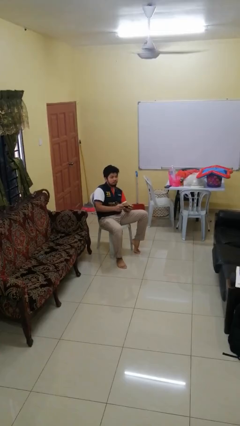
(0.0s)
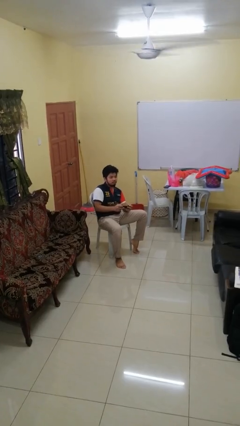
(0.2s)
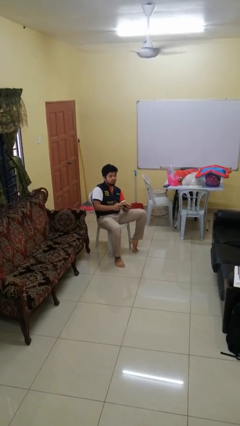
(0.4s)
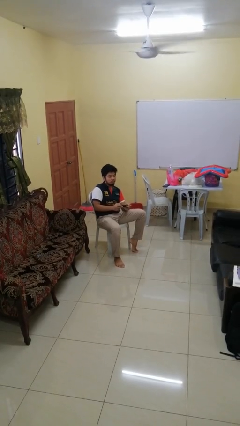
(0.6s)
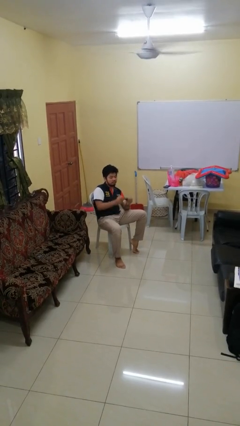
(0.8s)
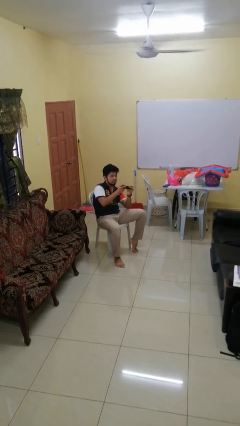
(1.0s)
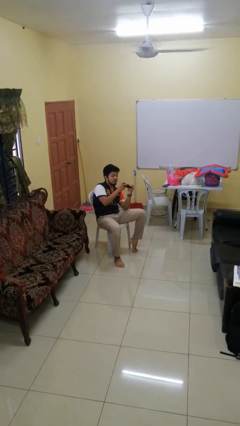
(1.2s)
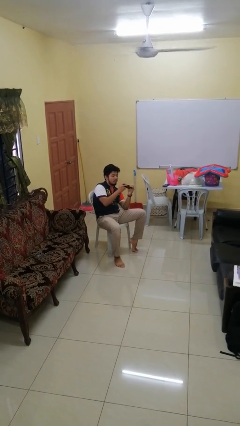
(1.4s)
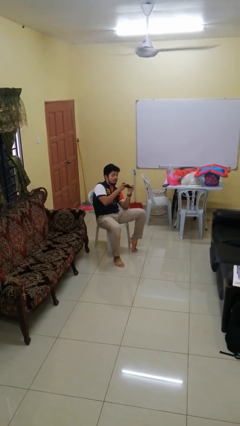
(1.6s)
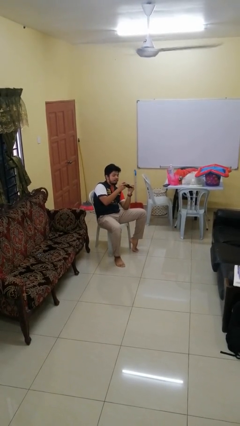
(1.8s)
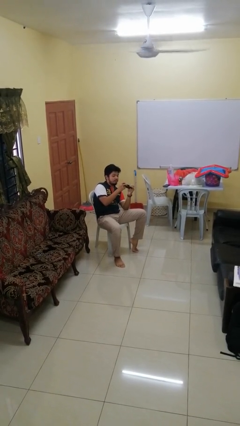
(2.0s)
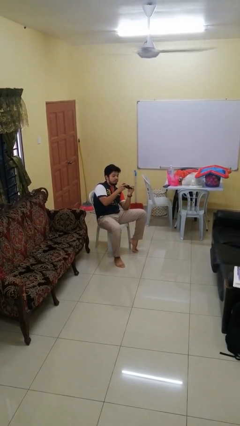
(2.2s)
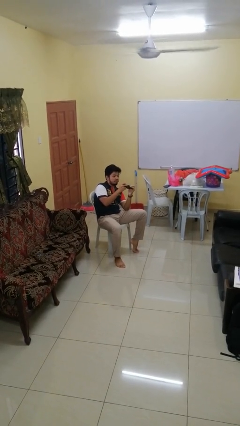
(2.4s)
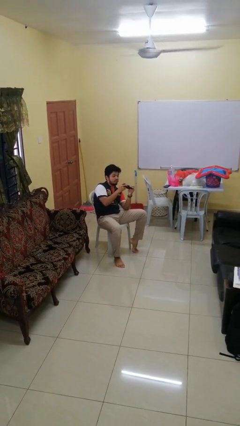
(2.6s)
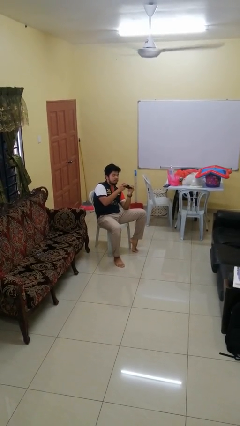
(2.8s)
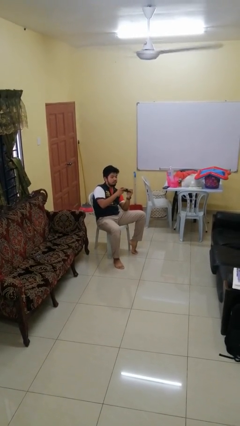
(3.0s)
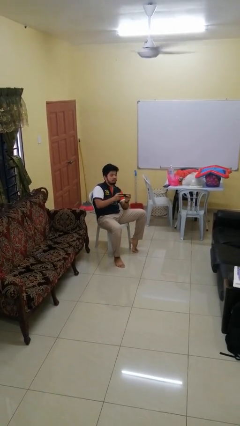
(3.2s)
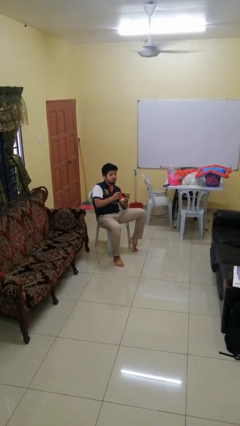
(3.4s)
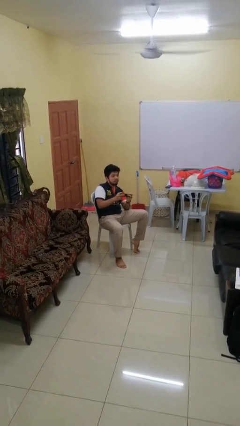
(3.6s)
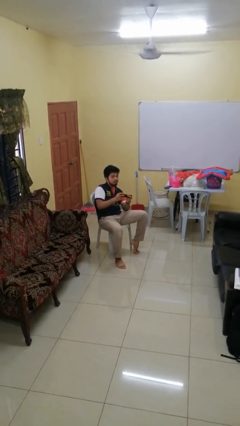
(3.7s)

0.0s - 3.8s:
person interacts with handheld game

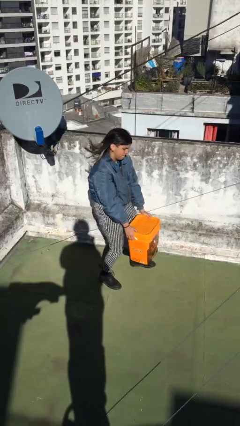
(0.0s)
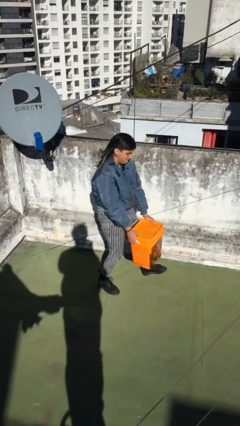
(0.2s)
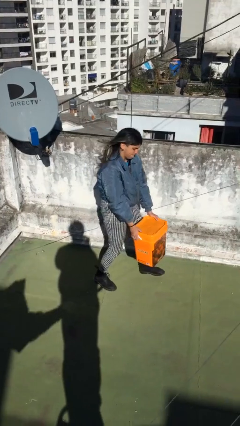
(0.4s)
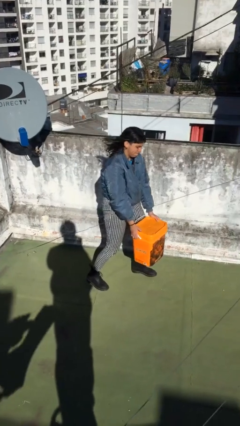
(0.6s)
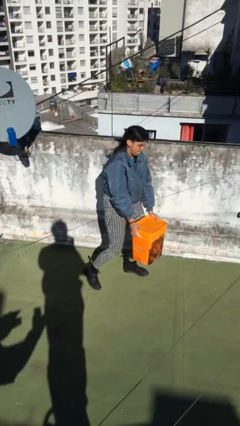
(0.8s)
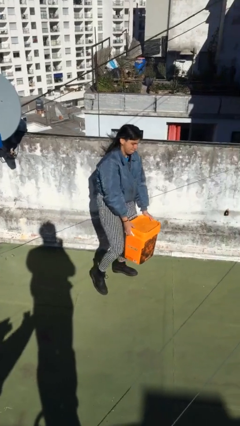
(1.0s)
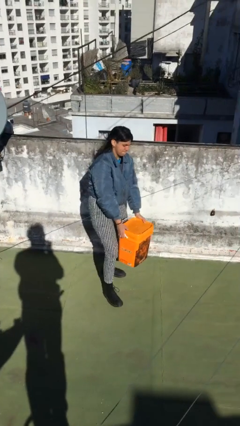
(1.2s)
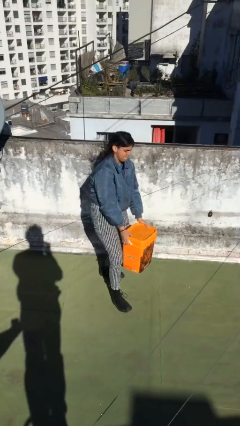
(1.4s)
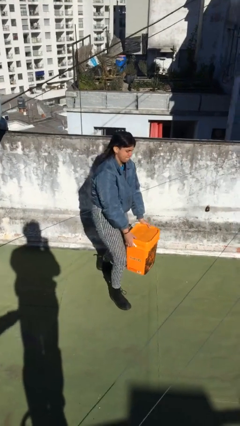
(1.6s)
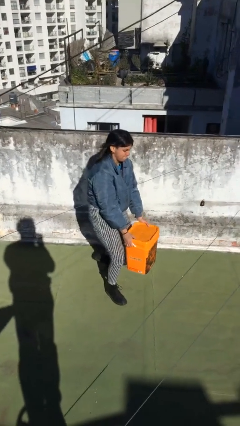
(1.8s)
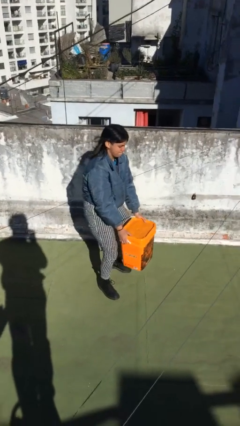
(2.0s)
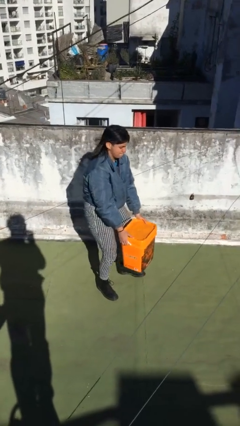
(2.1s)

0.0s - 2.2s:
person carries heavy object

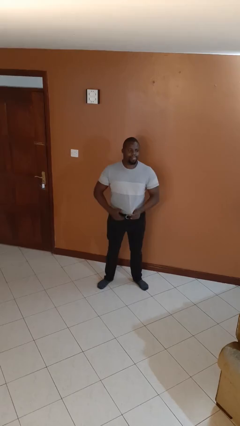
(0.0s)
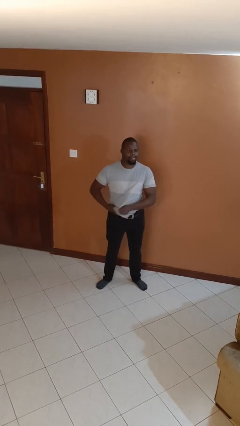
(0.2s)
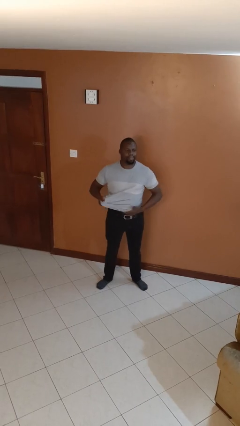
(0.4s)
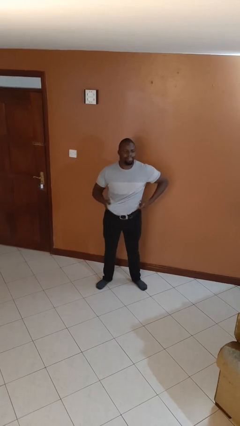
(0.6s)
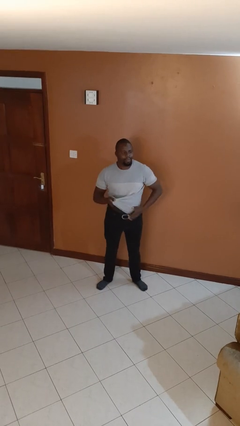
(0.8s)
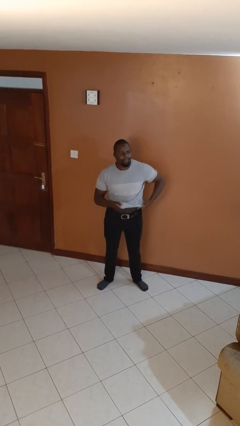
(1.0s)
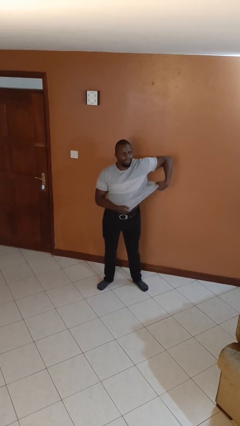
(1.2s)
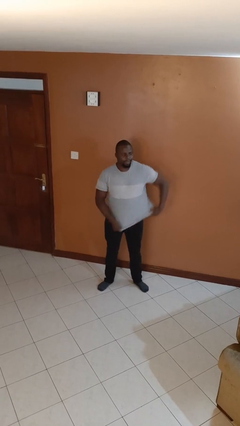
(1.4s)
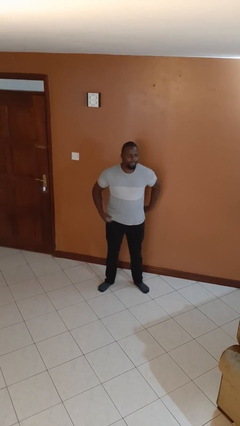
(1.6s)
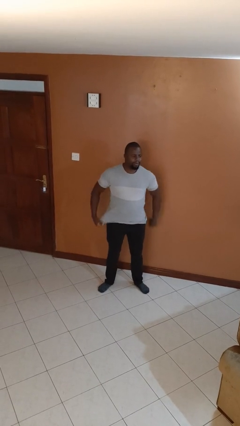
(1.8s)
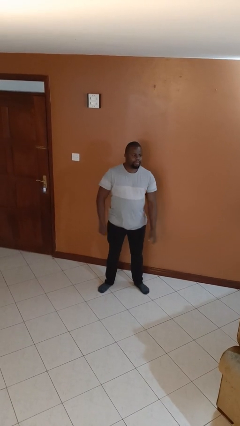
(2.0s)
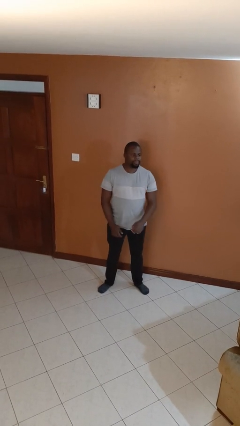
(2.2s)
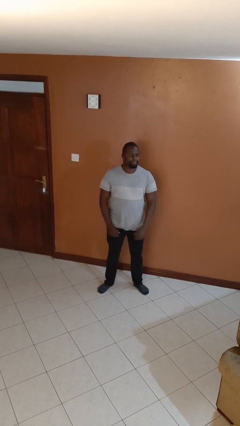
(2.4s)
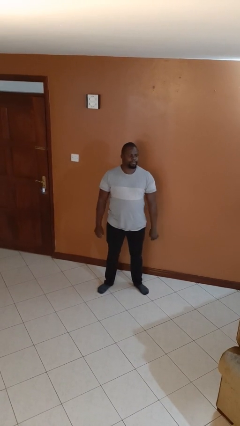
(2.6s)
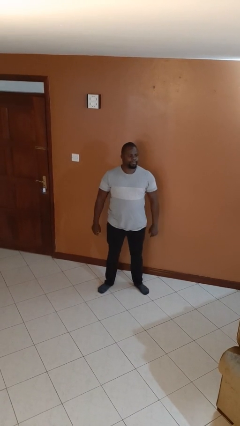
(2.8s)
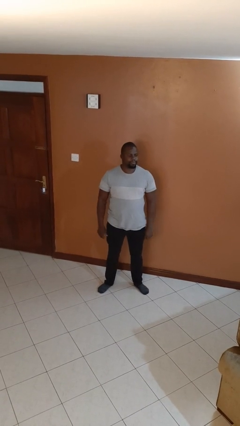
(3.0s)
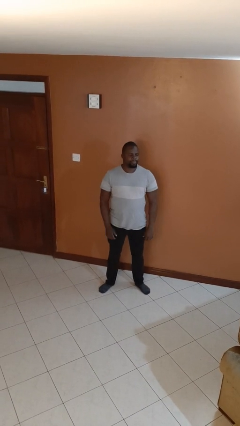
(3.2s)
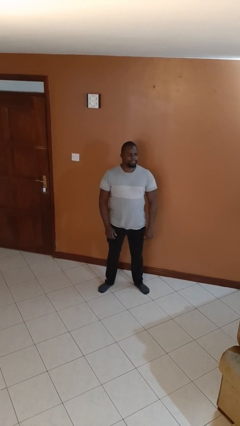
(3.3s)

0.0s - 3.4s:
person untucks shirt

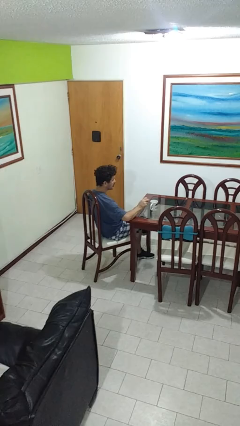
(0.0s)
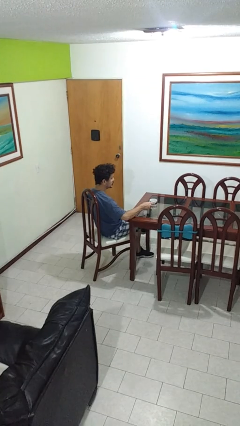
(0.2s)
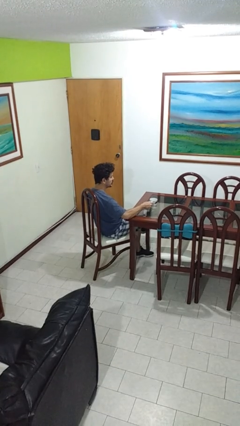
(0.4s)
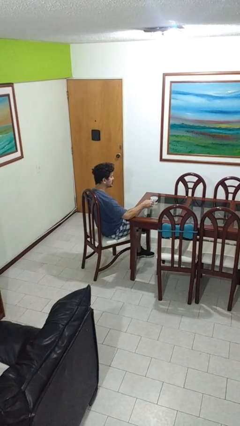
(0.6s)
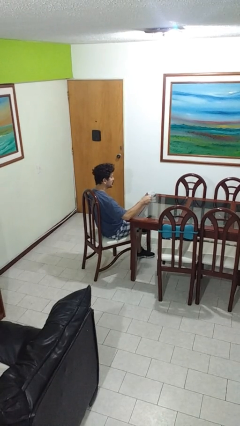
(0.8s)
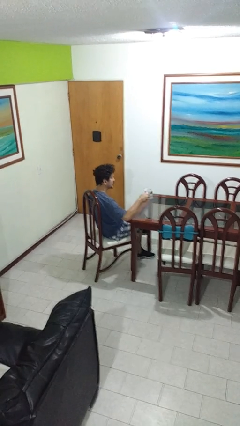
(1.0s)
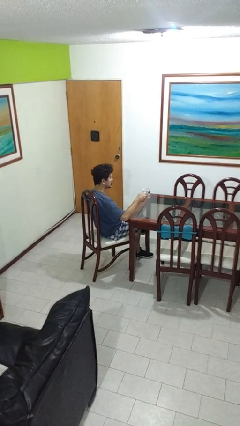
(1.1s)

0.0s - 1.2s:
person picks up object from table

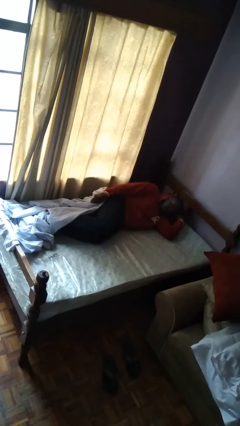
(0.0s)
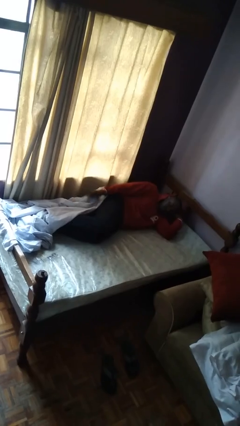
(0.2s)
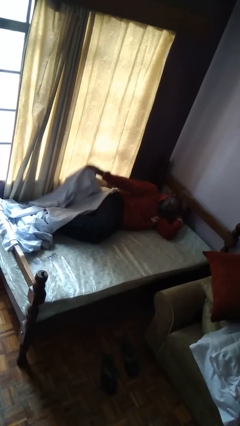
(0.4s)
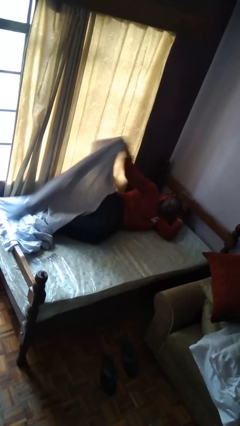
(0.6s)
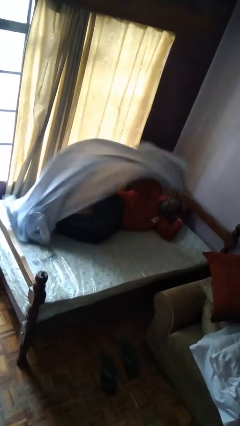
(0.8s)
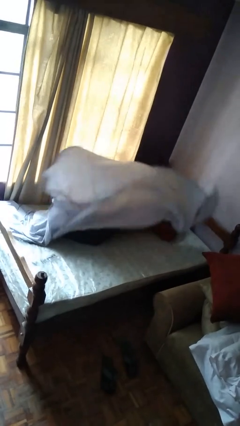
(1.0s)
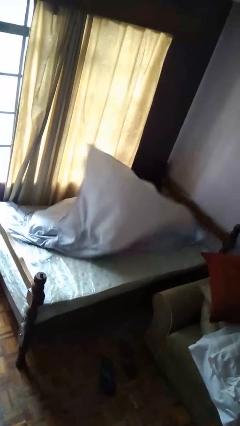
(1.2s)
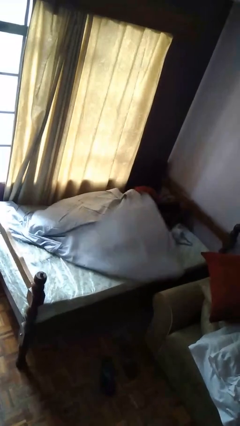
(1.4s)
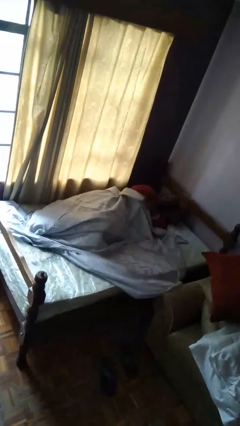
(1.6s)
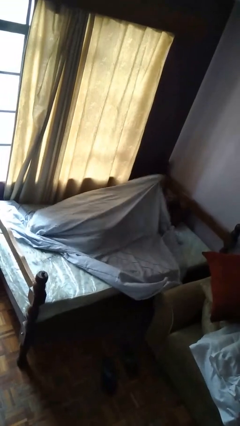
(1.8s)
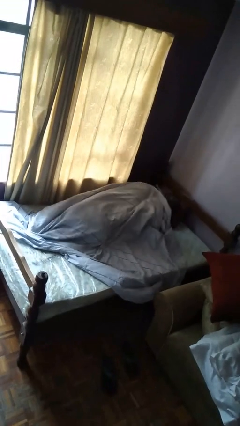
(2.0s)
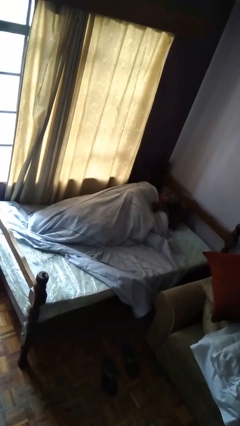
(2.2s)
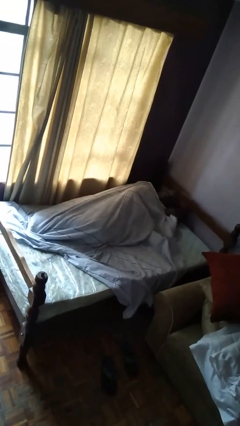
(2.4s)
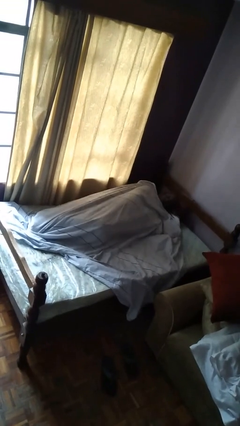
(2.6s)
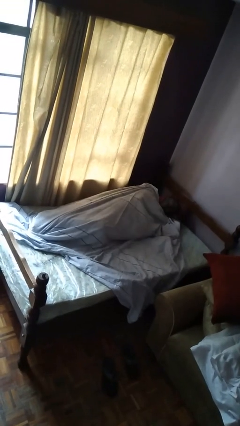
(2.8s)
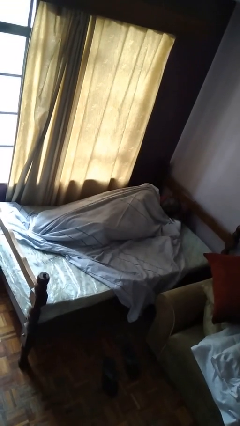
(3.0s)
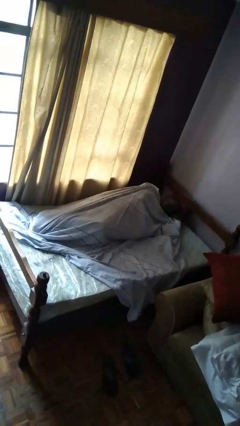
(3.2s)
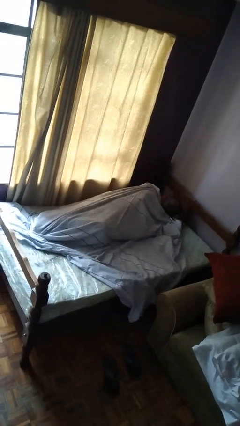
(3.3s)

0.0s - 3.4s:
person covers with bedsheets

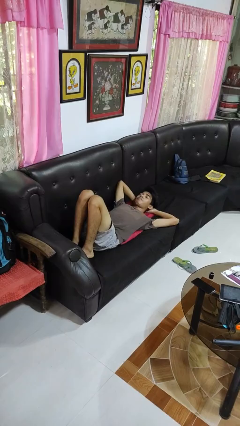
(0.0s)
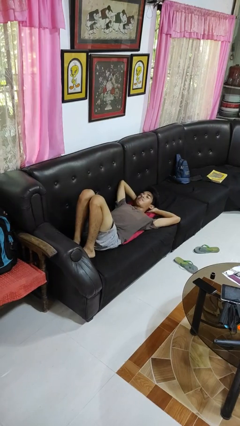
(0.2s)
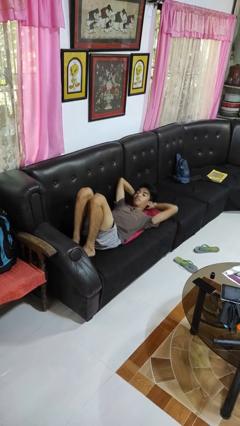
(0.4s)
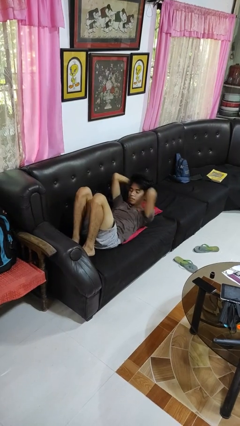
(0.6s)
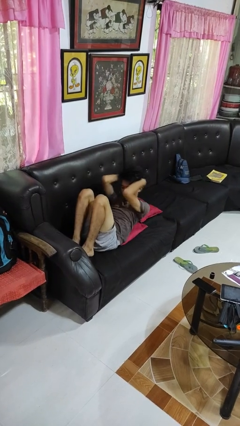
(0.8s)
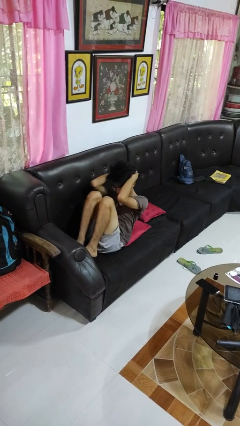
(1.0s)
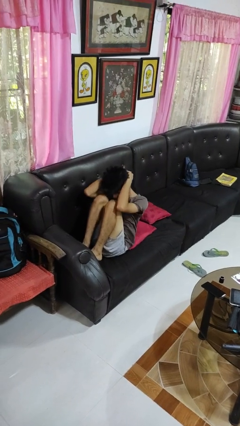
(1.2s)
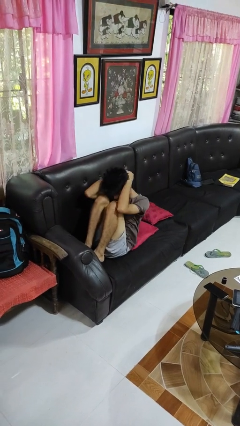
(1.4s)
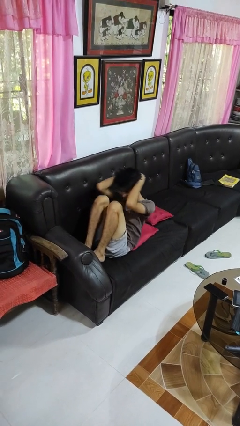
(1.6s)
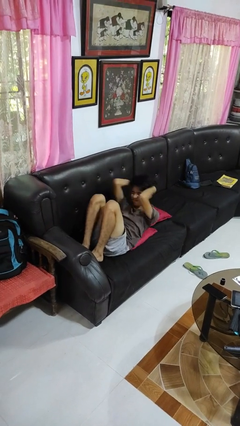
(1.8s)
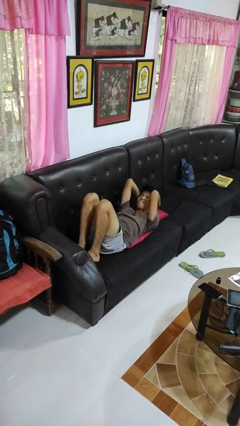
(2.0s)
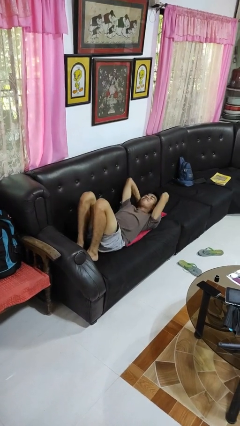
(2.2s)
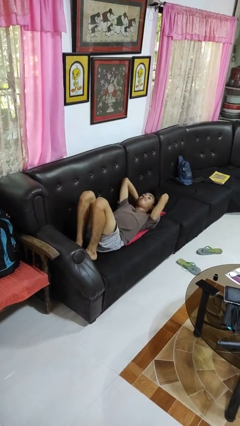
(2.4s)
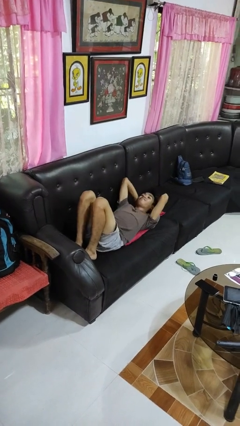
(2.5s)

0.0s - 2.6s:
person exercises with situp

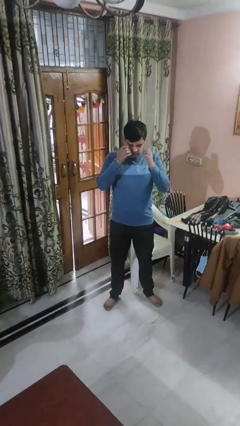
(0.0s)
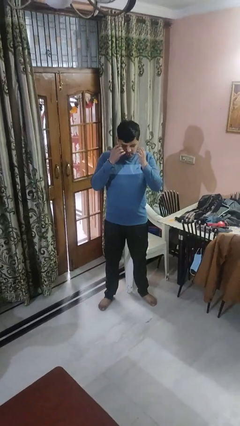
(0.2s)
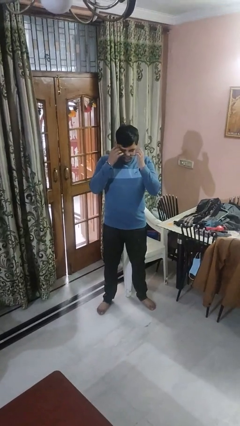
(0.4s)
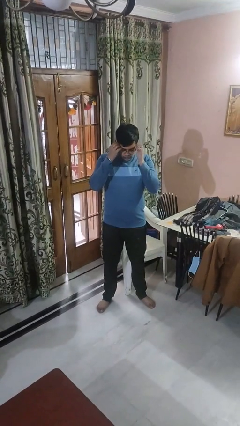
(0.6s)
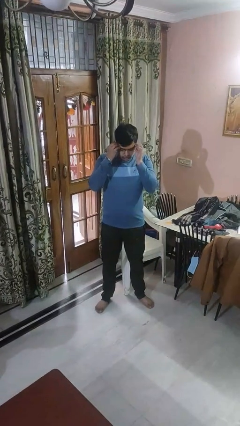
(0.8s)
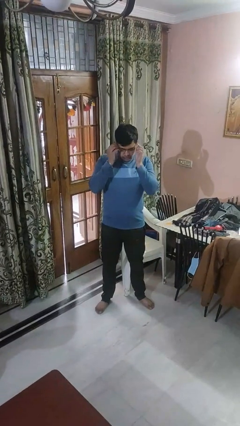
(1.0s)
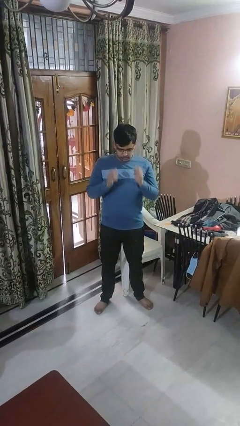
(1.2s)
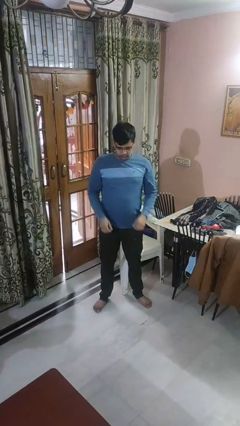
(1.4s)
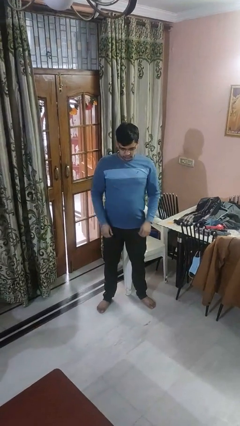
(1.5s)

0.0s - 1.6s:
person puts on glasses
